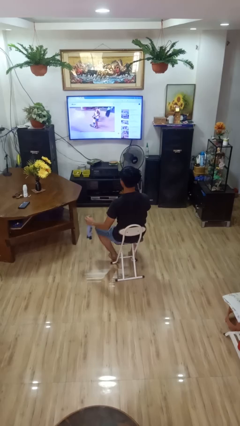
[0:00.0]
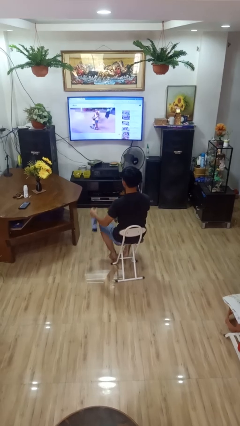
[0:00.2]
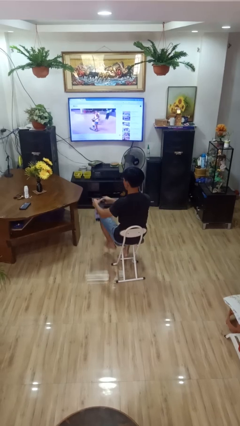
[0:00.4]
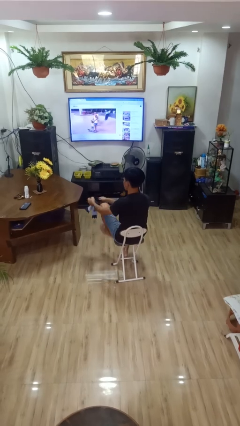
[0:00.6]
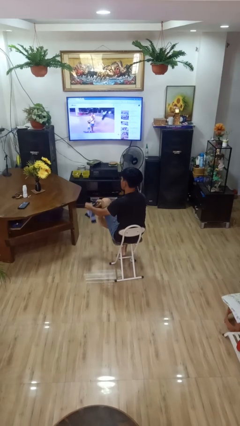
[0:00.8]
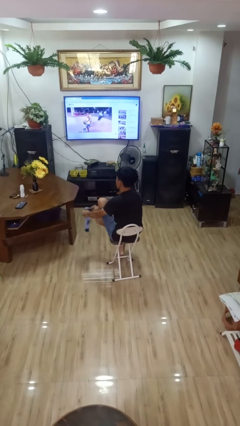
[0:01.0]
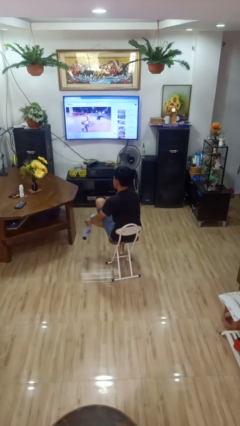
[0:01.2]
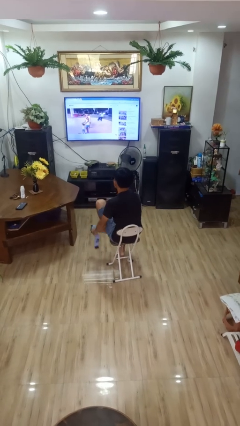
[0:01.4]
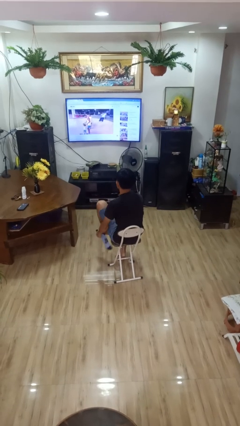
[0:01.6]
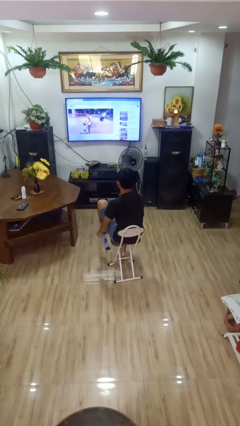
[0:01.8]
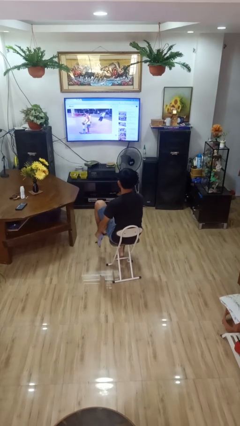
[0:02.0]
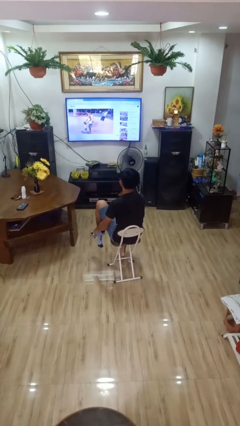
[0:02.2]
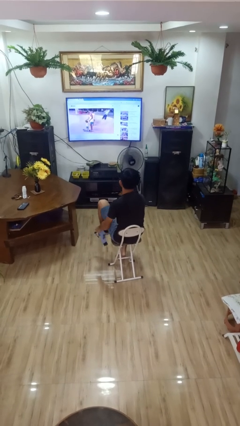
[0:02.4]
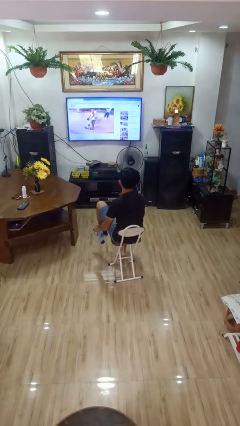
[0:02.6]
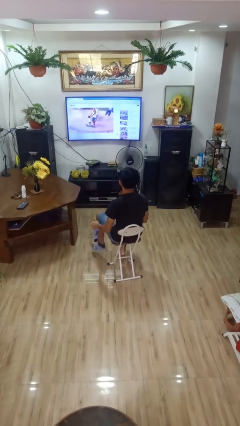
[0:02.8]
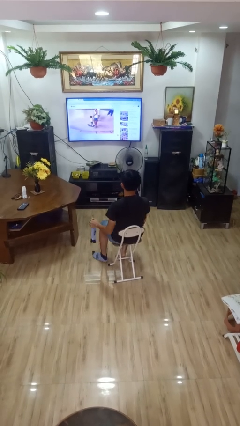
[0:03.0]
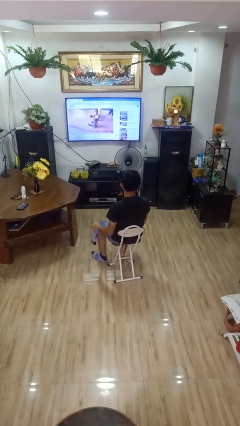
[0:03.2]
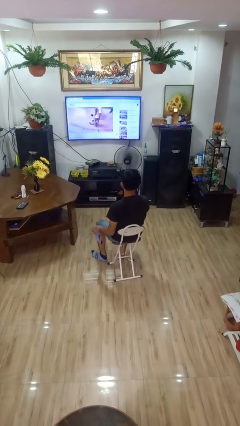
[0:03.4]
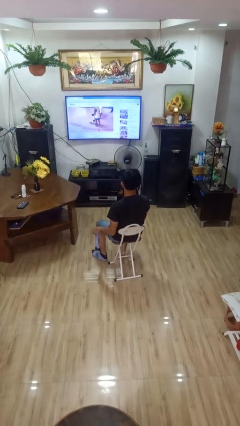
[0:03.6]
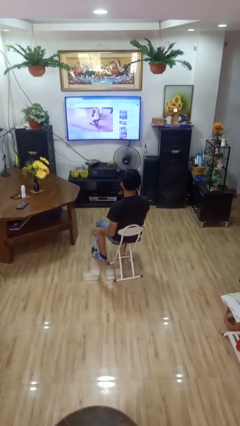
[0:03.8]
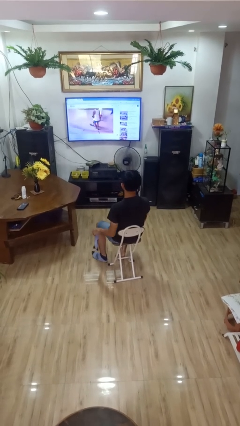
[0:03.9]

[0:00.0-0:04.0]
person puts on socks

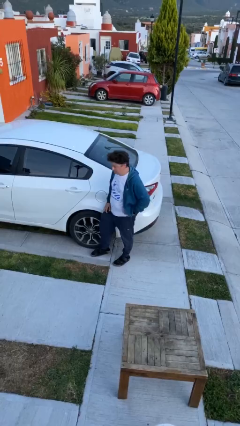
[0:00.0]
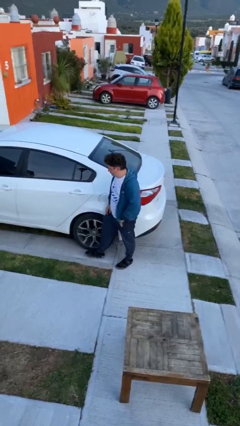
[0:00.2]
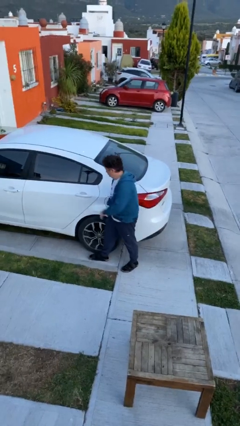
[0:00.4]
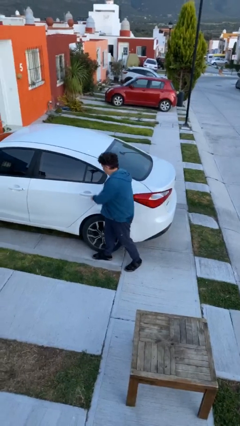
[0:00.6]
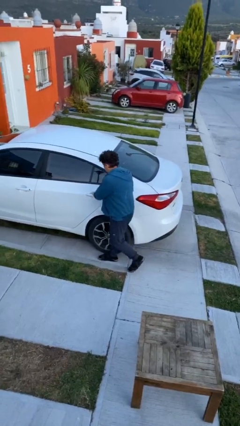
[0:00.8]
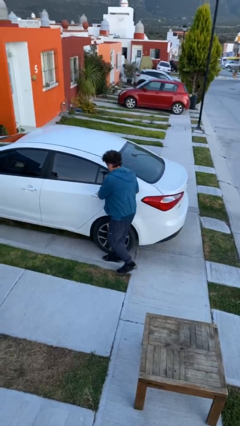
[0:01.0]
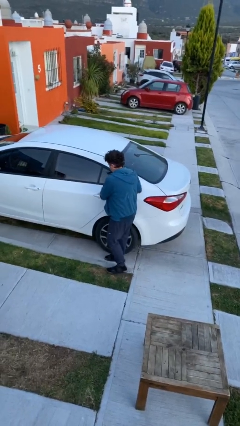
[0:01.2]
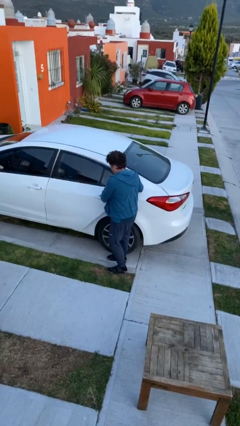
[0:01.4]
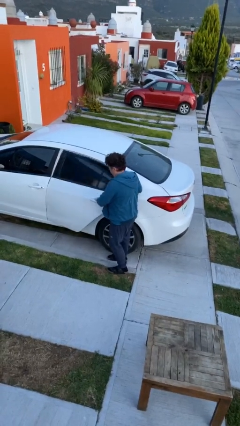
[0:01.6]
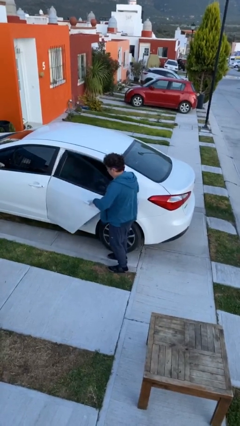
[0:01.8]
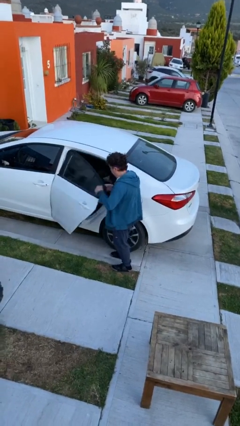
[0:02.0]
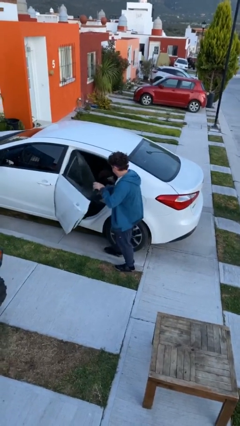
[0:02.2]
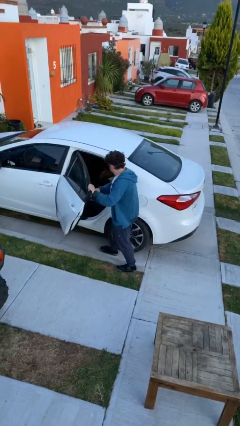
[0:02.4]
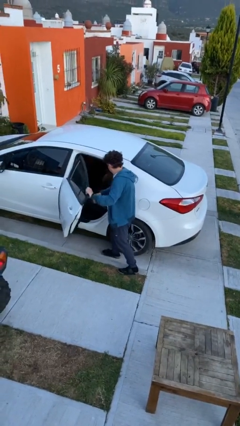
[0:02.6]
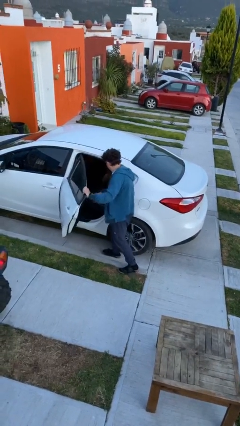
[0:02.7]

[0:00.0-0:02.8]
person opens car door

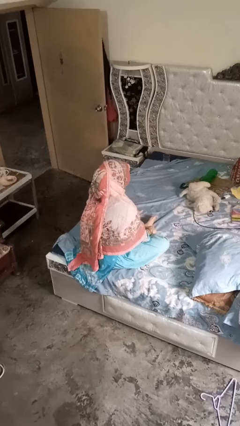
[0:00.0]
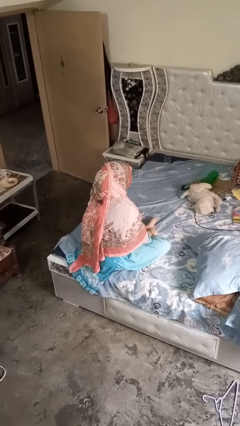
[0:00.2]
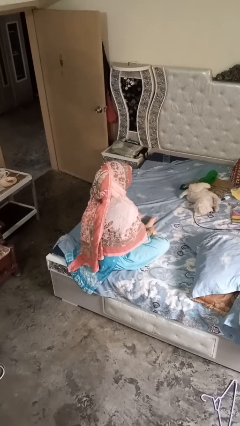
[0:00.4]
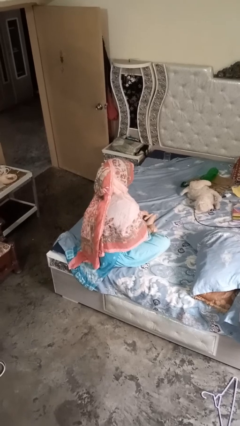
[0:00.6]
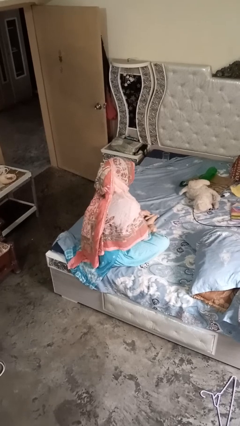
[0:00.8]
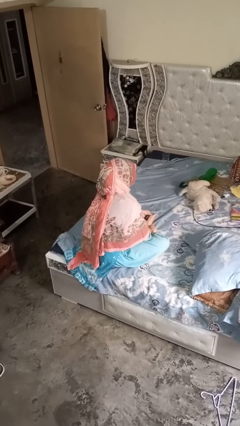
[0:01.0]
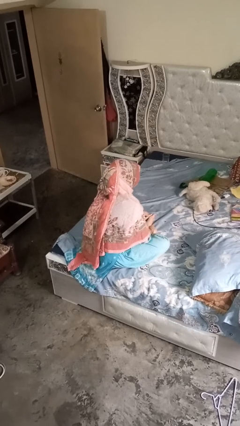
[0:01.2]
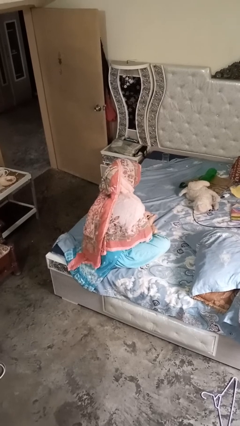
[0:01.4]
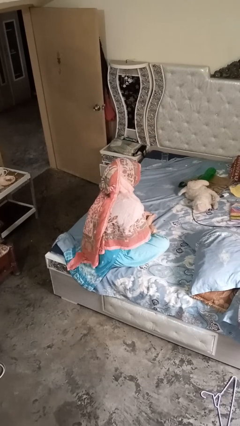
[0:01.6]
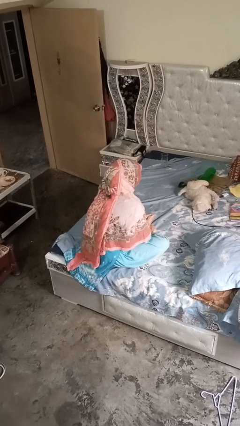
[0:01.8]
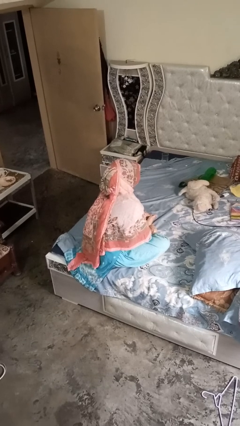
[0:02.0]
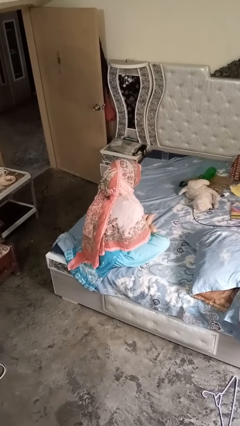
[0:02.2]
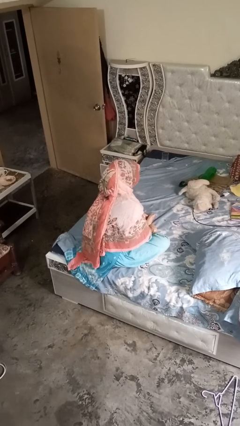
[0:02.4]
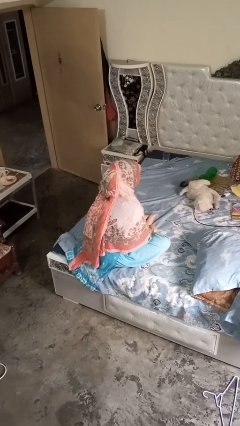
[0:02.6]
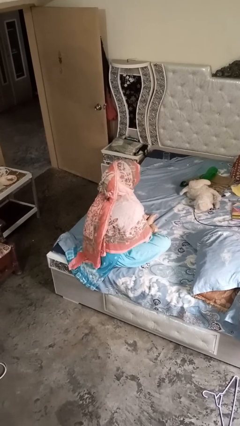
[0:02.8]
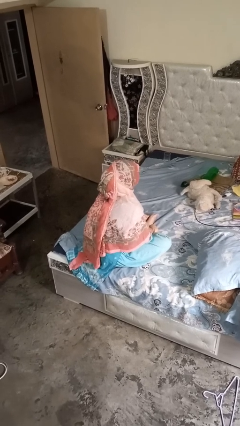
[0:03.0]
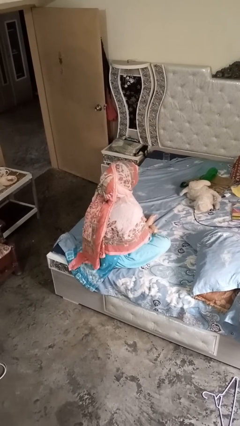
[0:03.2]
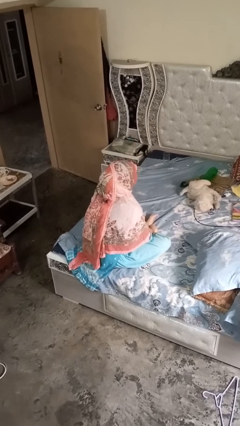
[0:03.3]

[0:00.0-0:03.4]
person rubs foot

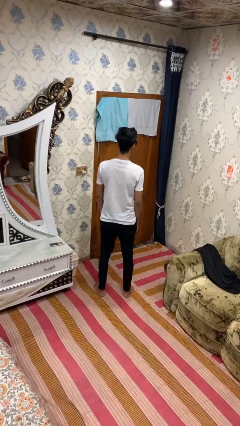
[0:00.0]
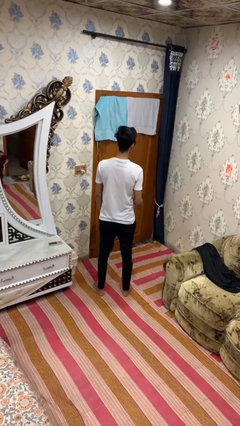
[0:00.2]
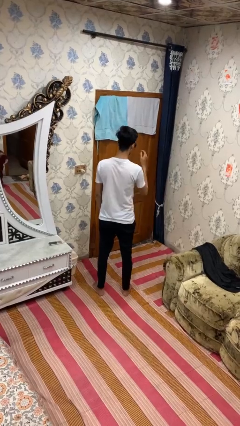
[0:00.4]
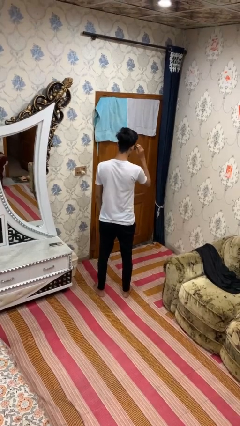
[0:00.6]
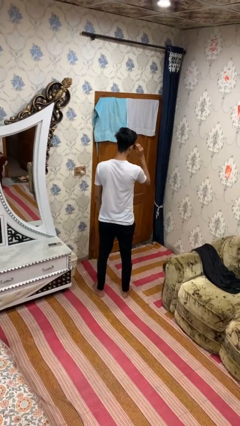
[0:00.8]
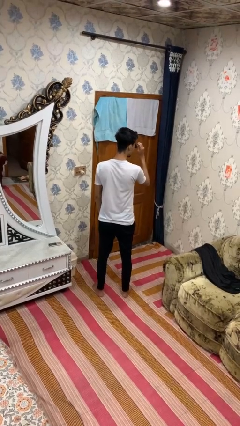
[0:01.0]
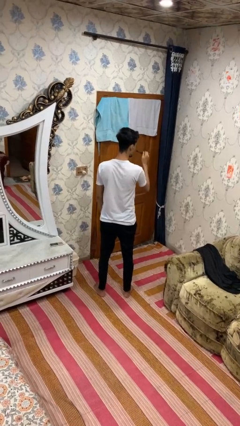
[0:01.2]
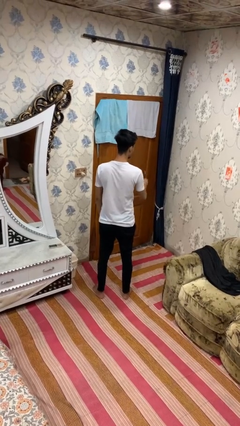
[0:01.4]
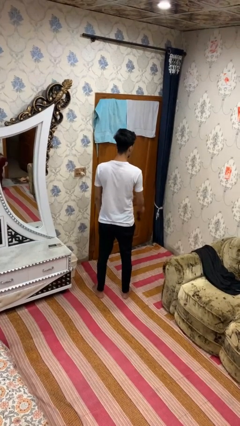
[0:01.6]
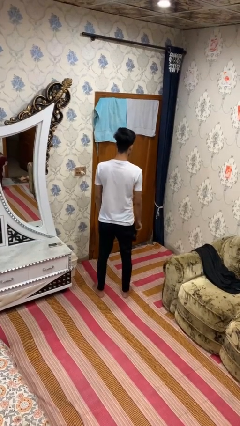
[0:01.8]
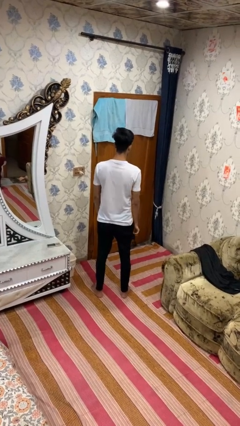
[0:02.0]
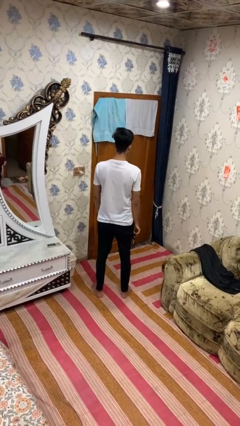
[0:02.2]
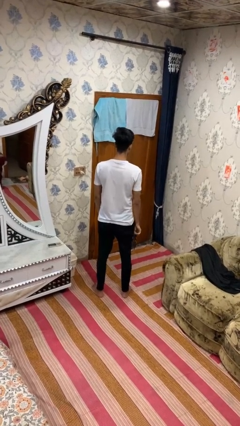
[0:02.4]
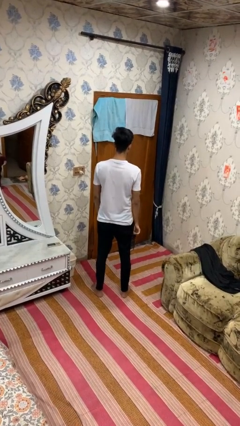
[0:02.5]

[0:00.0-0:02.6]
person takes off sunglasses

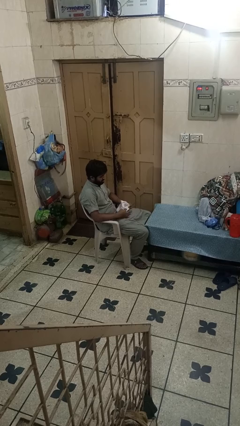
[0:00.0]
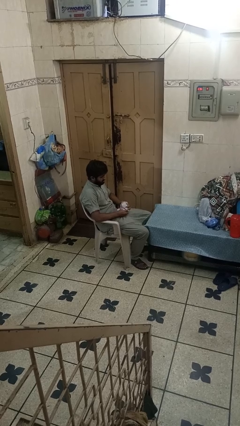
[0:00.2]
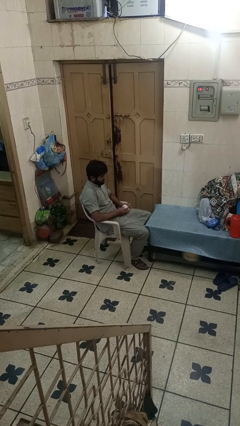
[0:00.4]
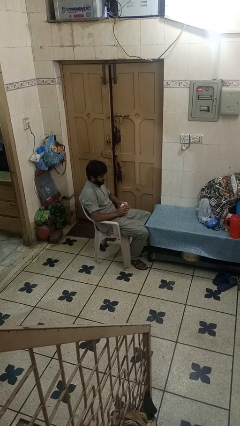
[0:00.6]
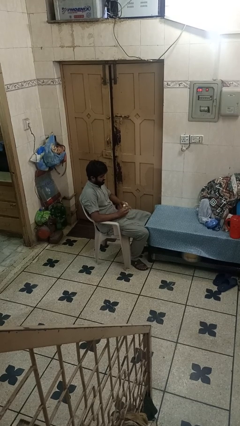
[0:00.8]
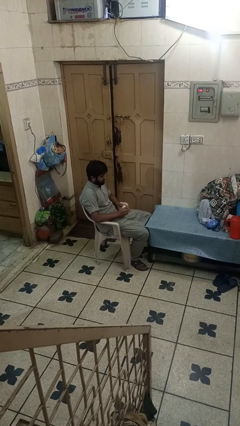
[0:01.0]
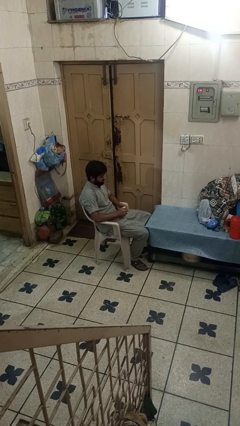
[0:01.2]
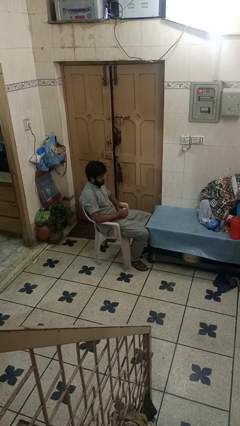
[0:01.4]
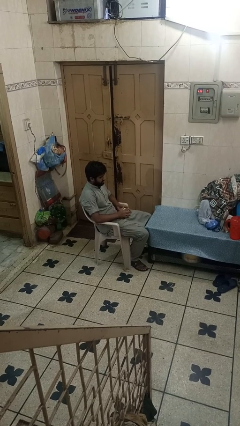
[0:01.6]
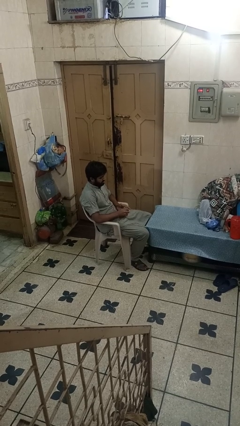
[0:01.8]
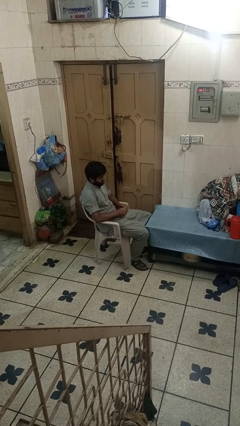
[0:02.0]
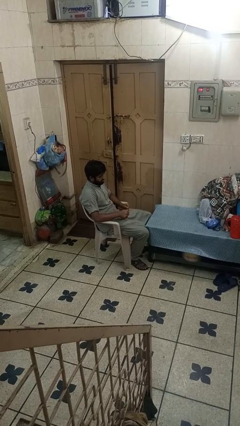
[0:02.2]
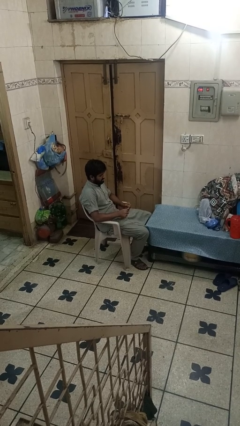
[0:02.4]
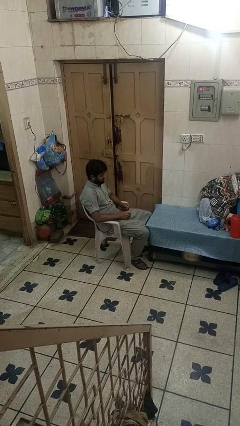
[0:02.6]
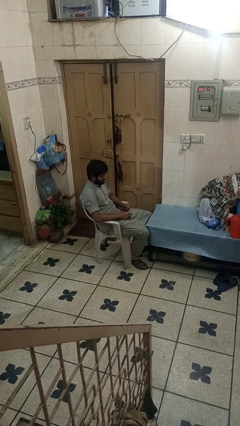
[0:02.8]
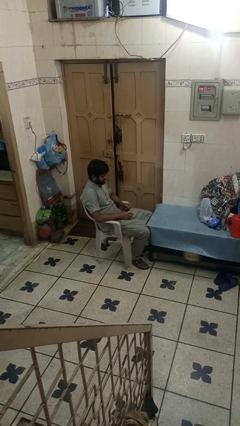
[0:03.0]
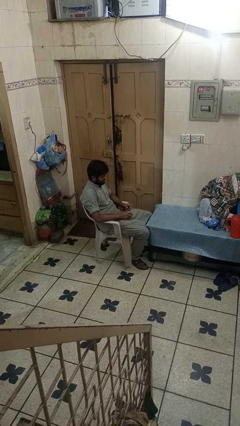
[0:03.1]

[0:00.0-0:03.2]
person crumples paper

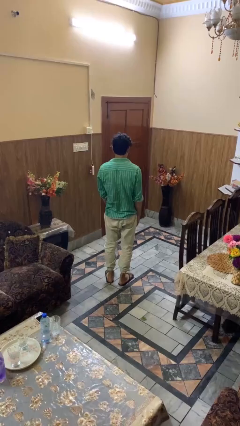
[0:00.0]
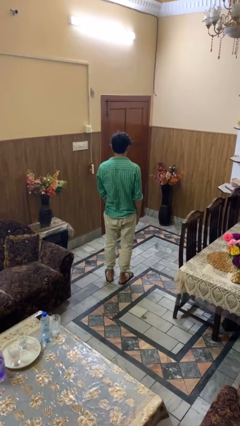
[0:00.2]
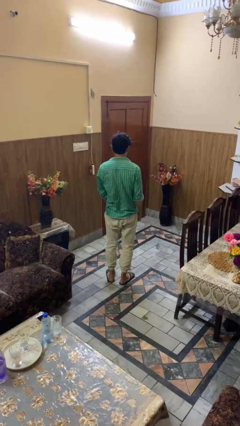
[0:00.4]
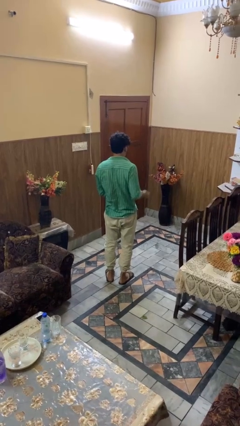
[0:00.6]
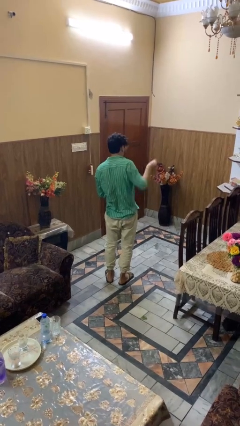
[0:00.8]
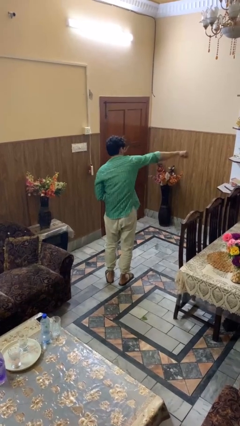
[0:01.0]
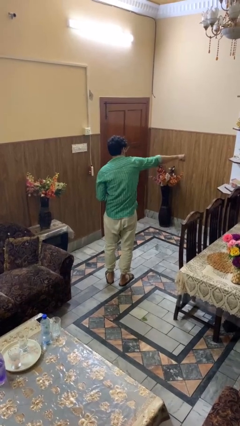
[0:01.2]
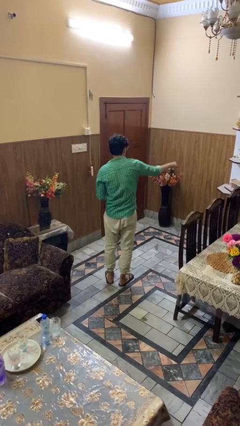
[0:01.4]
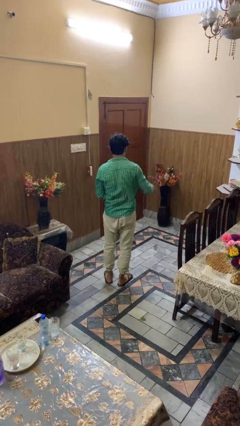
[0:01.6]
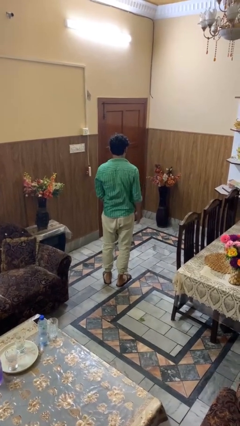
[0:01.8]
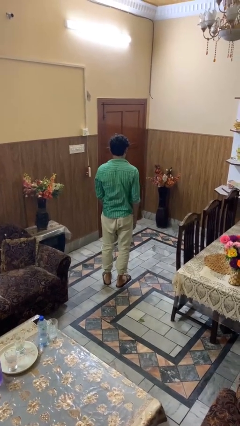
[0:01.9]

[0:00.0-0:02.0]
person karate chop
